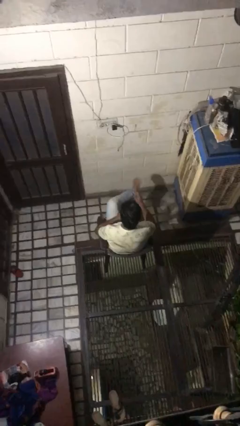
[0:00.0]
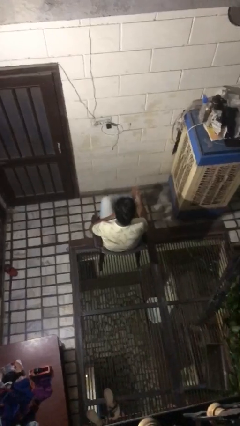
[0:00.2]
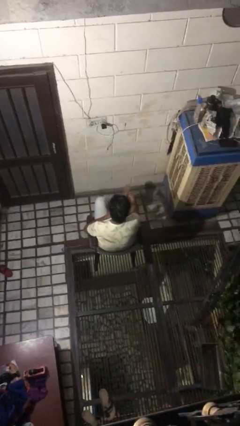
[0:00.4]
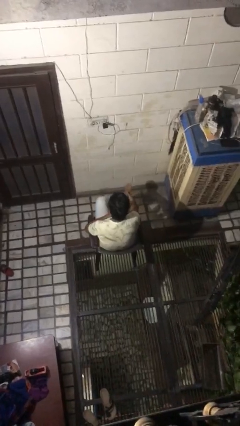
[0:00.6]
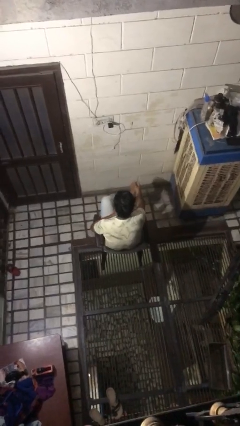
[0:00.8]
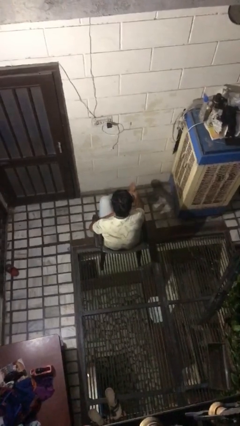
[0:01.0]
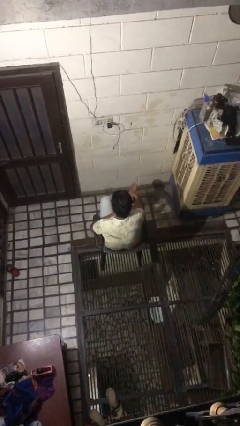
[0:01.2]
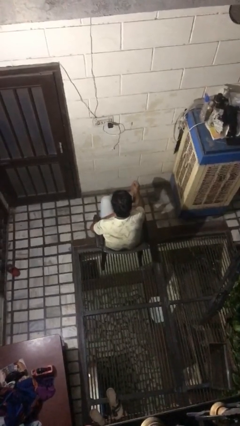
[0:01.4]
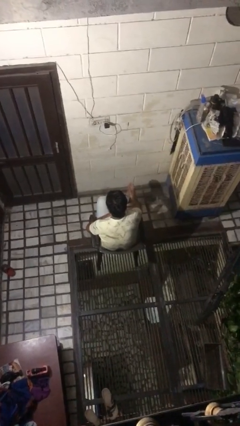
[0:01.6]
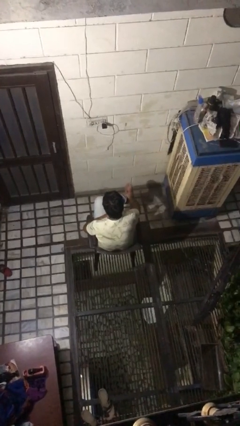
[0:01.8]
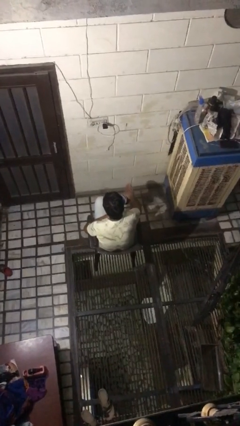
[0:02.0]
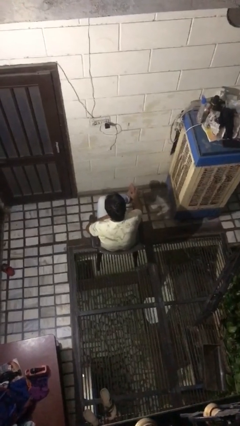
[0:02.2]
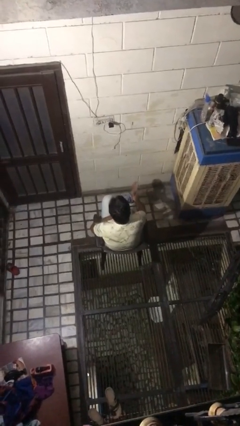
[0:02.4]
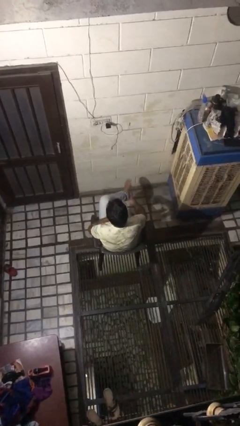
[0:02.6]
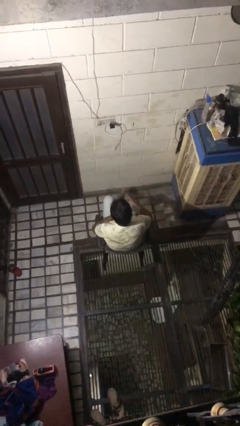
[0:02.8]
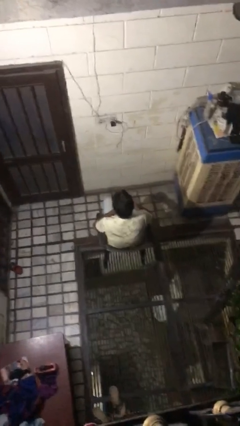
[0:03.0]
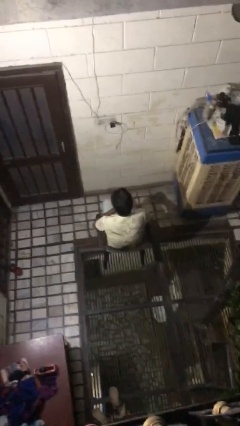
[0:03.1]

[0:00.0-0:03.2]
person rubs foot

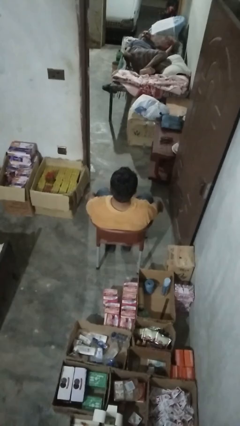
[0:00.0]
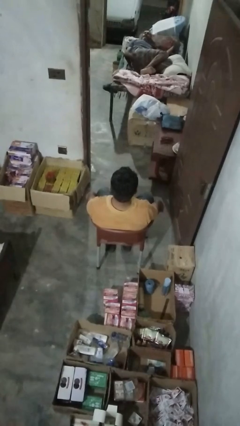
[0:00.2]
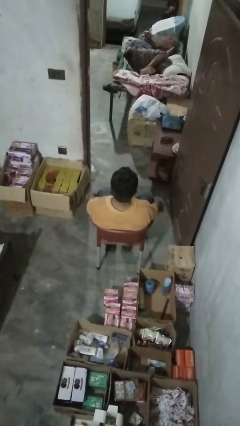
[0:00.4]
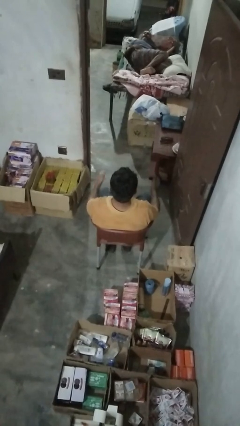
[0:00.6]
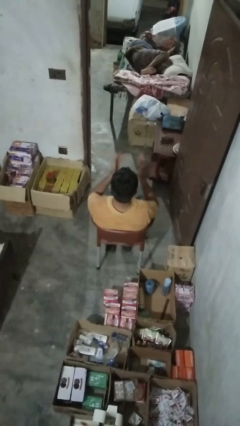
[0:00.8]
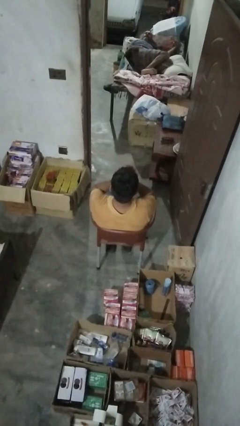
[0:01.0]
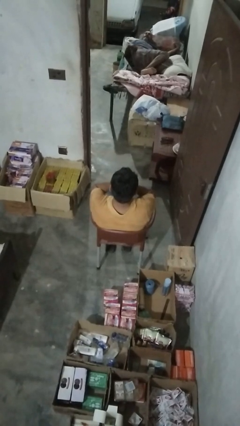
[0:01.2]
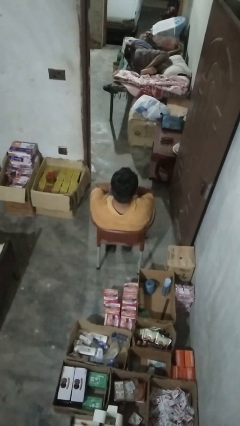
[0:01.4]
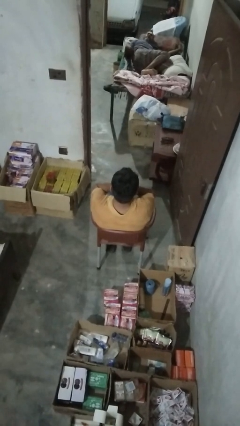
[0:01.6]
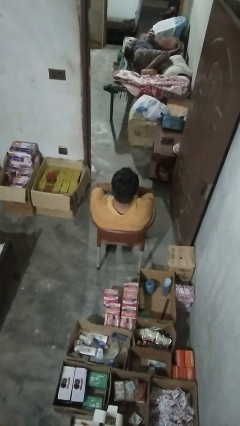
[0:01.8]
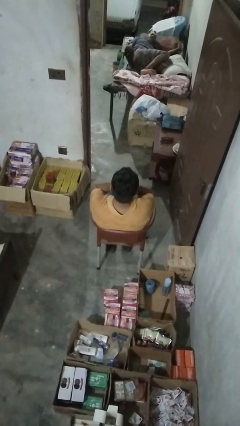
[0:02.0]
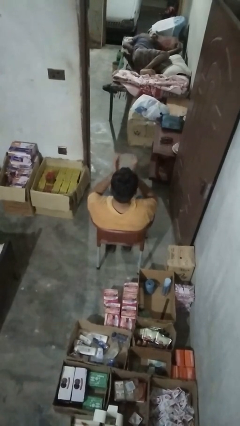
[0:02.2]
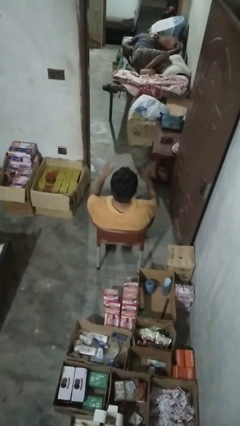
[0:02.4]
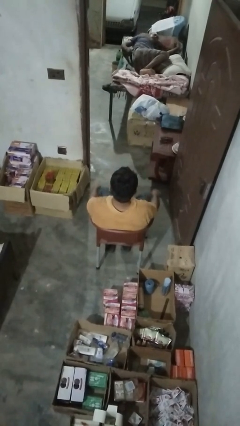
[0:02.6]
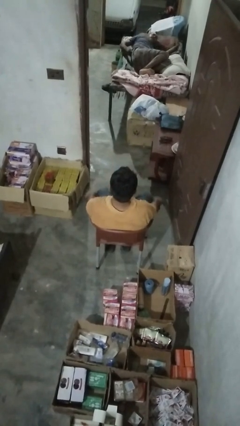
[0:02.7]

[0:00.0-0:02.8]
person covers face with hands

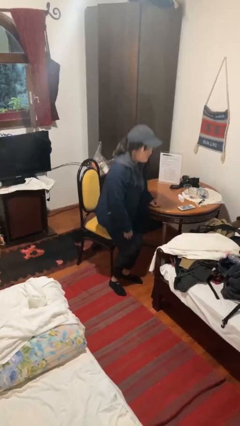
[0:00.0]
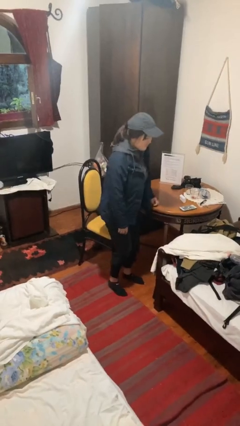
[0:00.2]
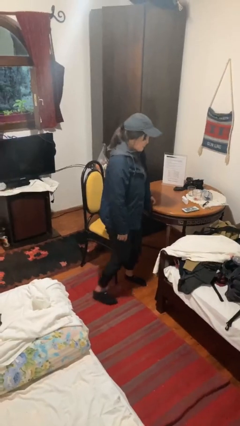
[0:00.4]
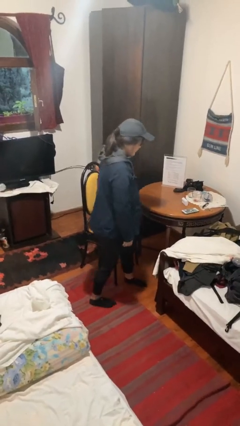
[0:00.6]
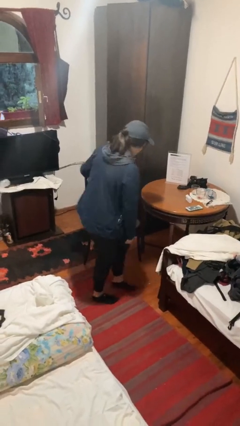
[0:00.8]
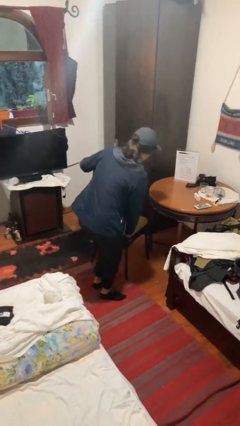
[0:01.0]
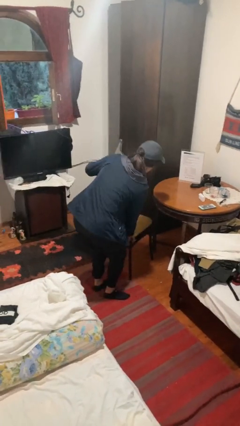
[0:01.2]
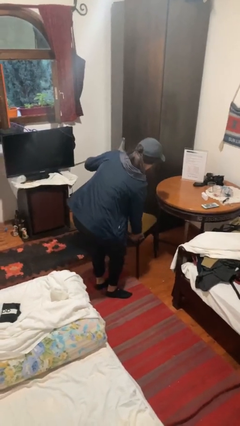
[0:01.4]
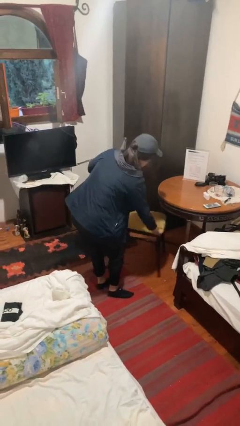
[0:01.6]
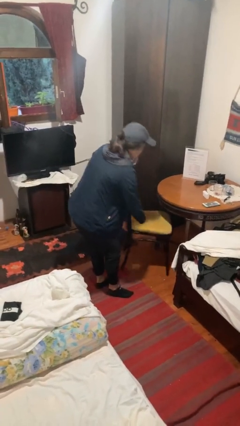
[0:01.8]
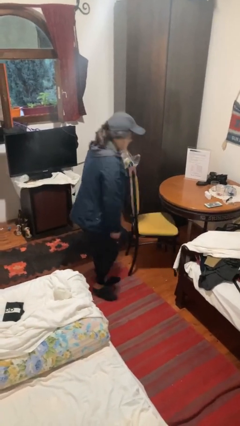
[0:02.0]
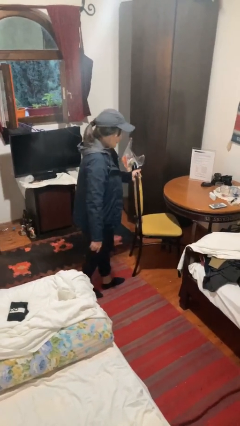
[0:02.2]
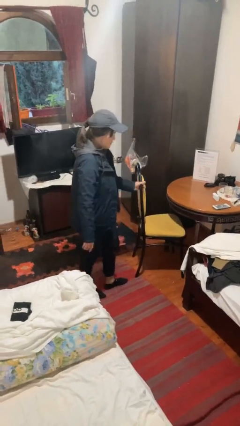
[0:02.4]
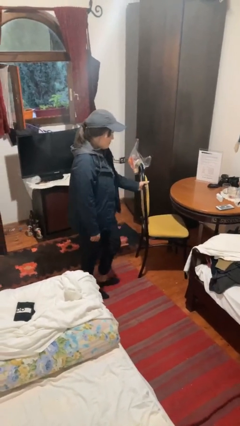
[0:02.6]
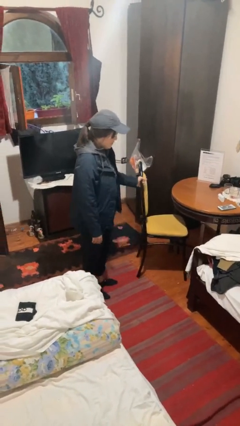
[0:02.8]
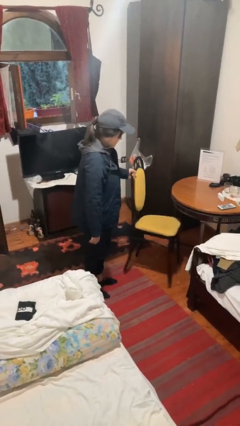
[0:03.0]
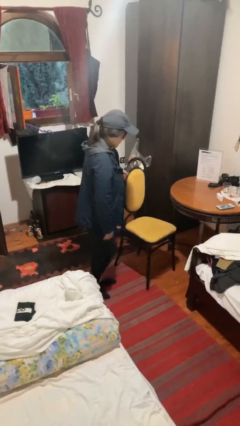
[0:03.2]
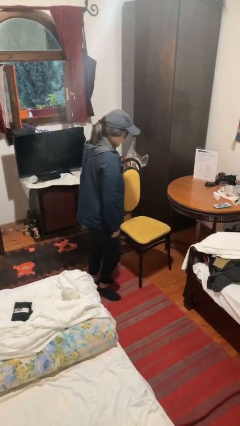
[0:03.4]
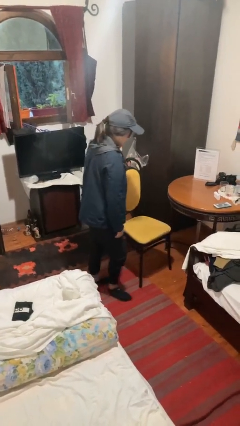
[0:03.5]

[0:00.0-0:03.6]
person stands up

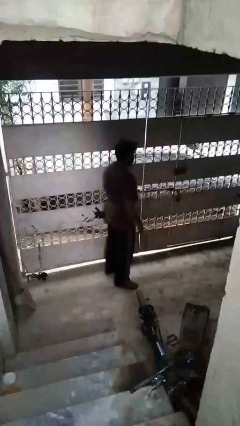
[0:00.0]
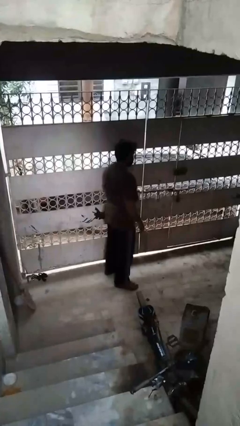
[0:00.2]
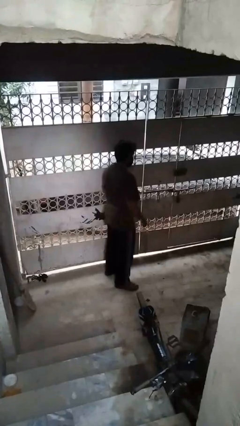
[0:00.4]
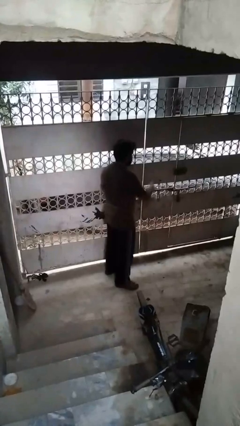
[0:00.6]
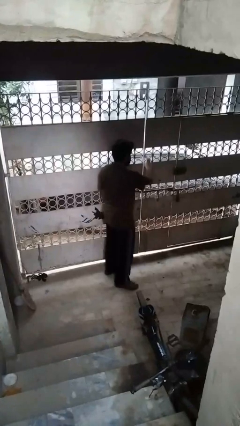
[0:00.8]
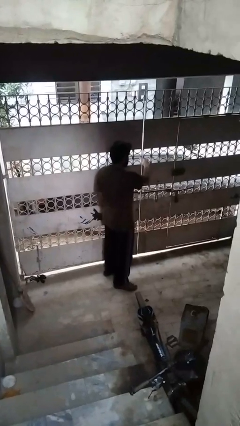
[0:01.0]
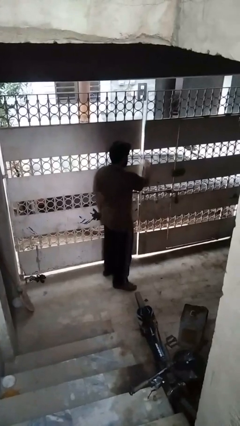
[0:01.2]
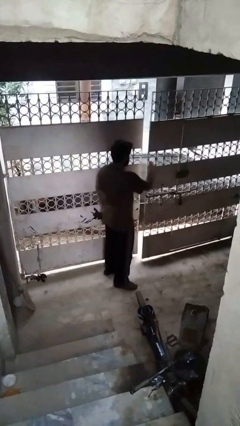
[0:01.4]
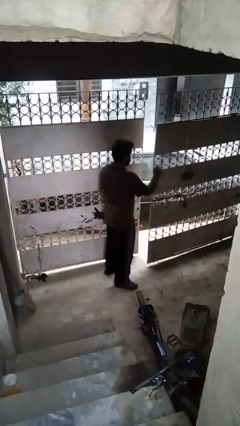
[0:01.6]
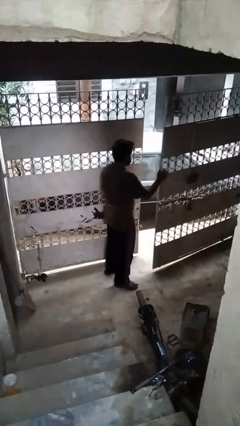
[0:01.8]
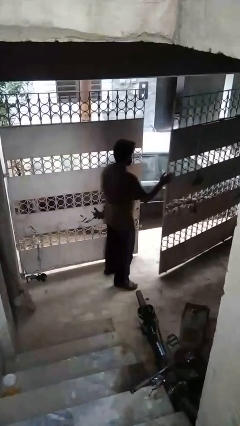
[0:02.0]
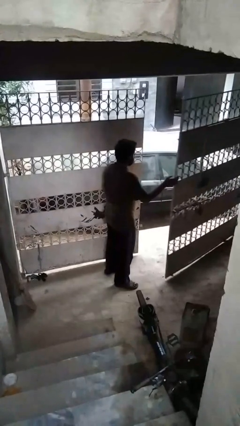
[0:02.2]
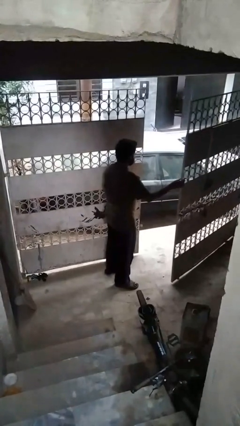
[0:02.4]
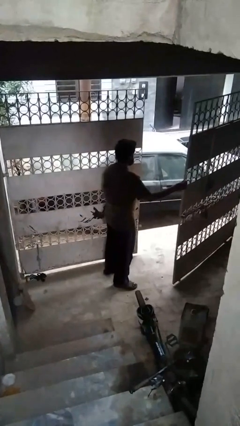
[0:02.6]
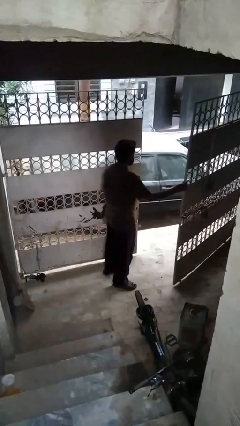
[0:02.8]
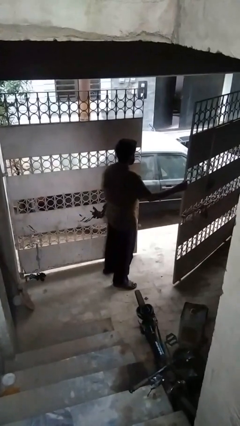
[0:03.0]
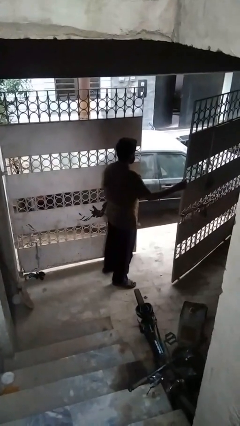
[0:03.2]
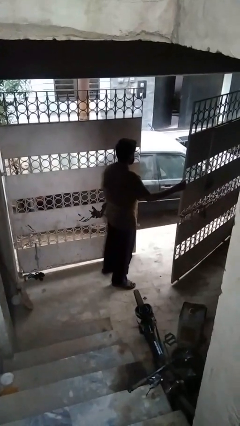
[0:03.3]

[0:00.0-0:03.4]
person opens gate

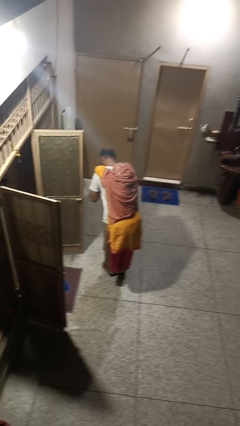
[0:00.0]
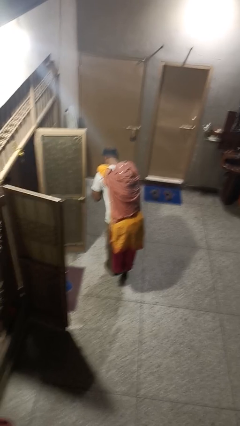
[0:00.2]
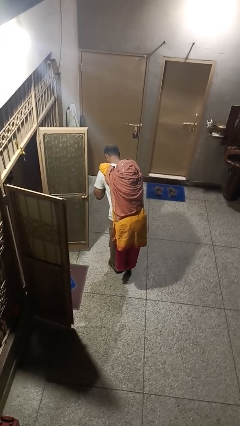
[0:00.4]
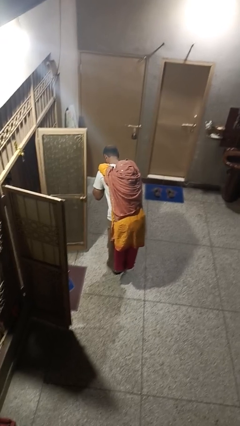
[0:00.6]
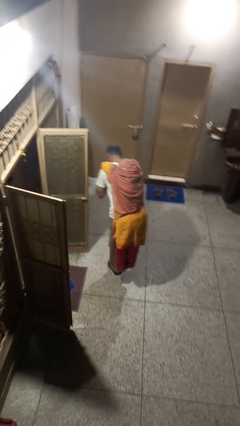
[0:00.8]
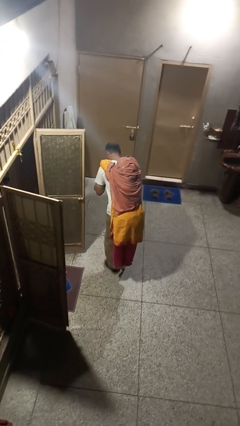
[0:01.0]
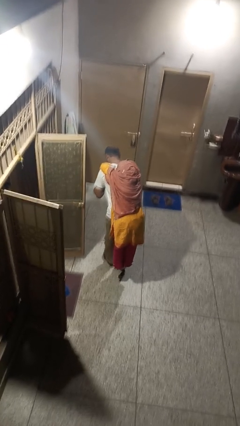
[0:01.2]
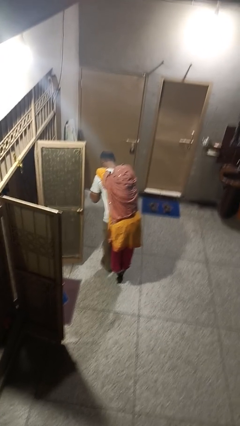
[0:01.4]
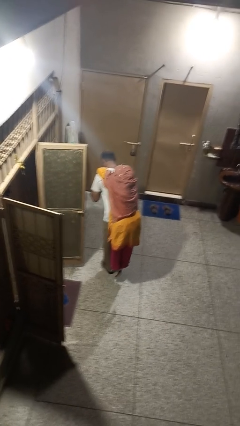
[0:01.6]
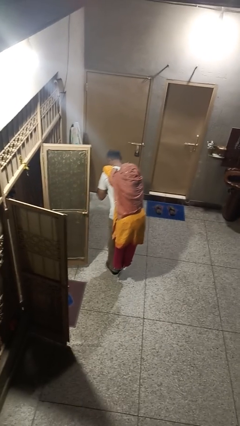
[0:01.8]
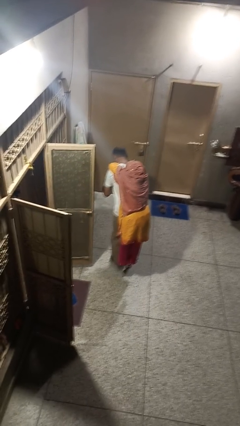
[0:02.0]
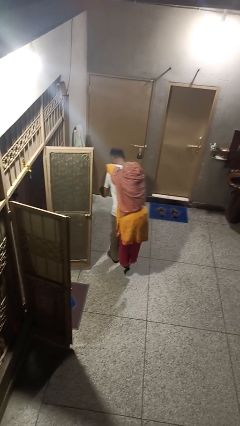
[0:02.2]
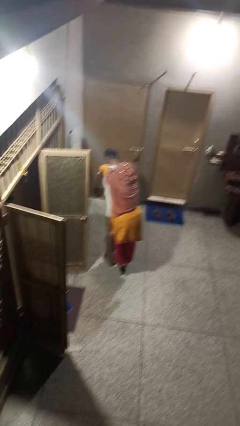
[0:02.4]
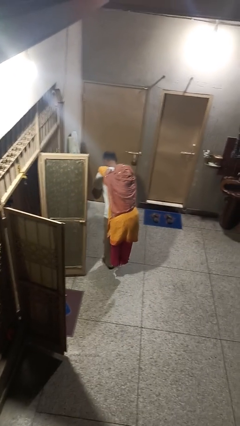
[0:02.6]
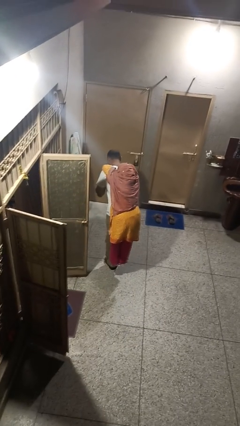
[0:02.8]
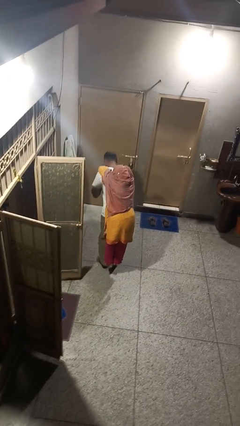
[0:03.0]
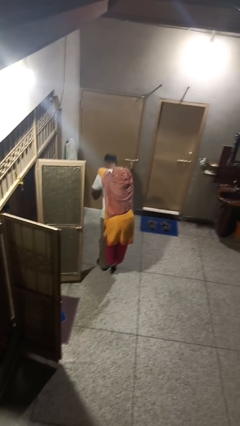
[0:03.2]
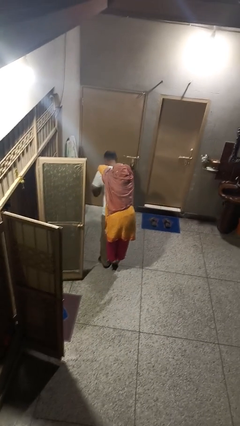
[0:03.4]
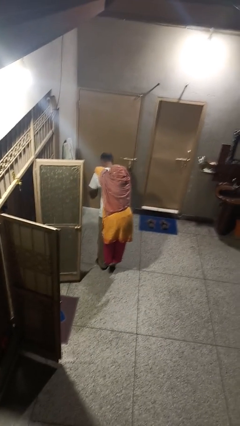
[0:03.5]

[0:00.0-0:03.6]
person carries person on back

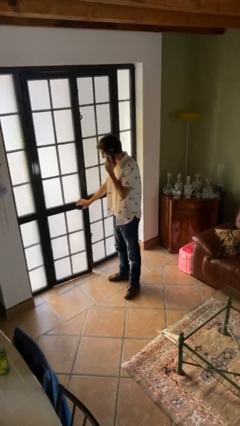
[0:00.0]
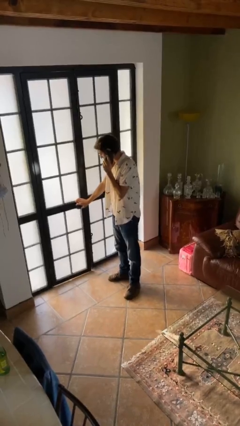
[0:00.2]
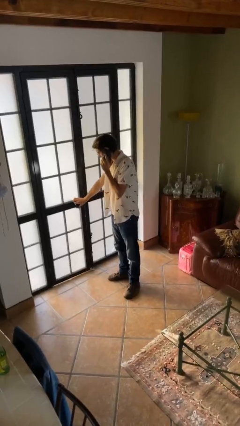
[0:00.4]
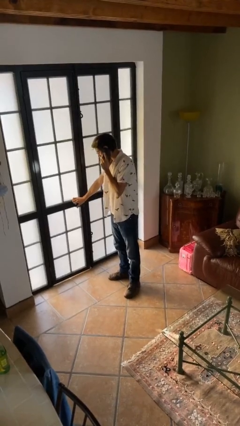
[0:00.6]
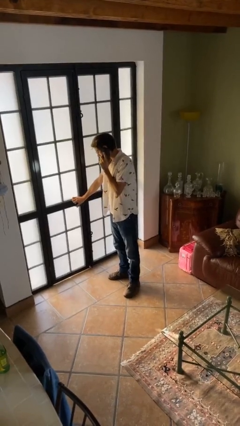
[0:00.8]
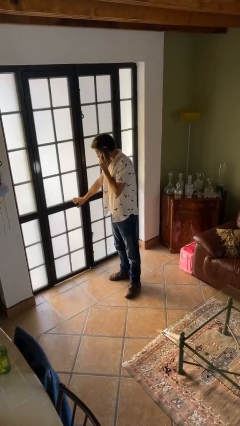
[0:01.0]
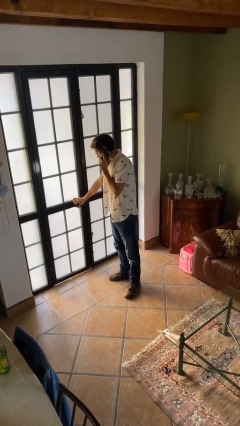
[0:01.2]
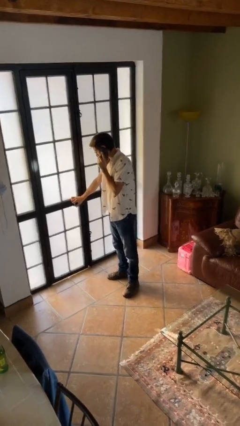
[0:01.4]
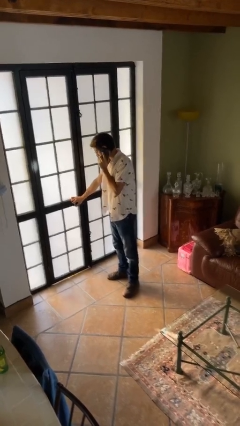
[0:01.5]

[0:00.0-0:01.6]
person closes facility door
